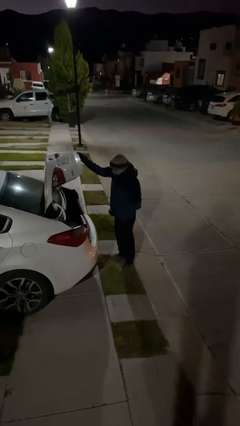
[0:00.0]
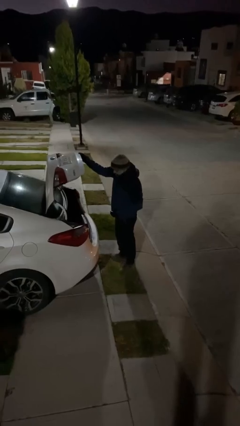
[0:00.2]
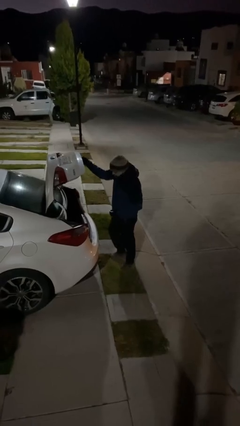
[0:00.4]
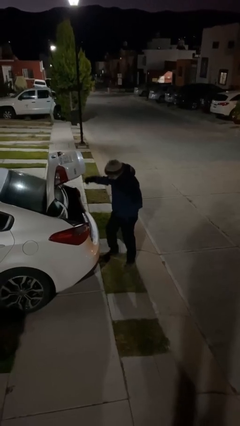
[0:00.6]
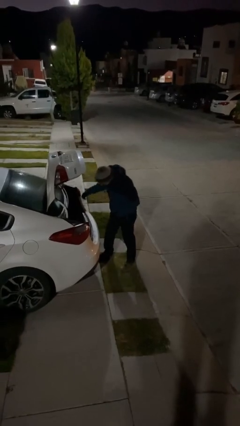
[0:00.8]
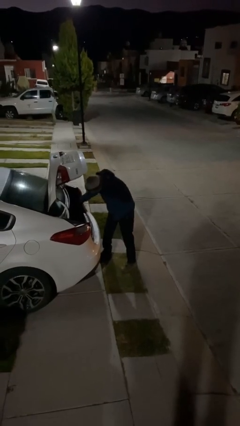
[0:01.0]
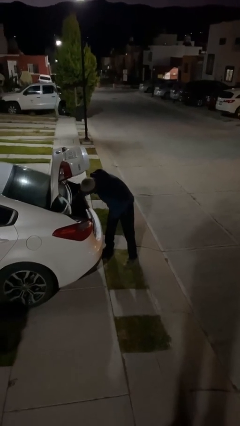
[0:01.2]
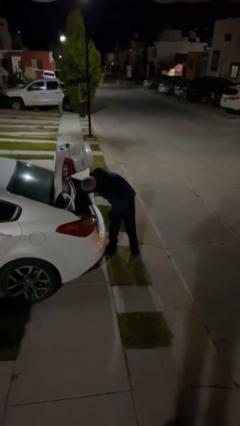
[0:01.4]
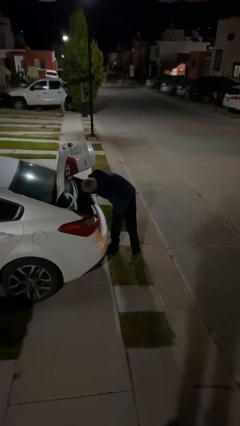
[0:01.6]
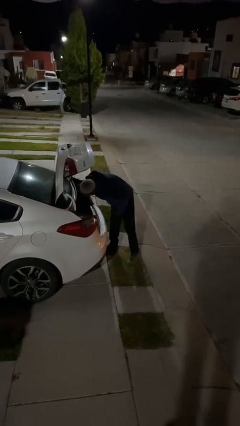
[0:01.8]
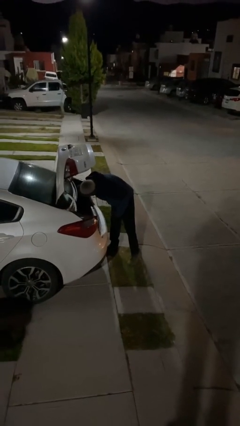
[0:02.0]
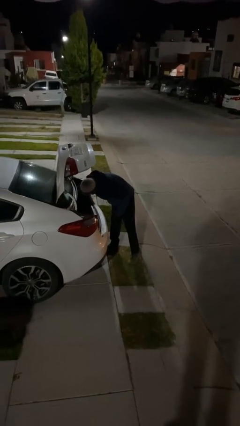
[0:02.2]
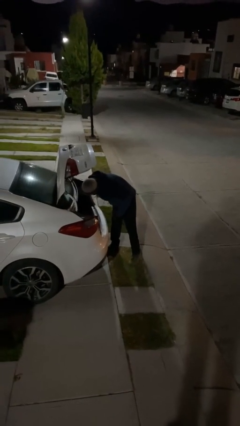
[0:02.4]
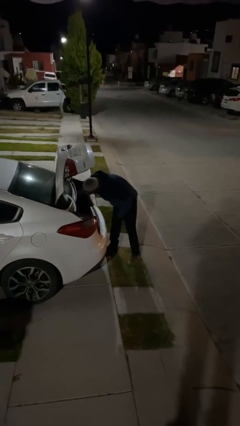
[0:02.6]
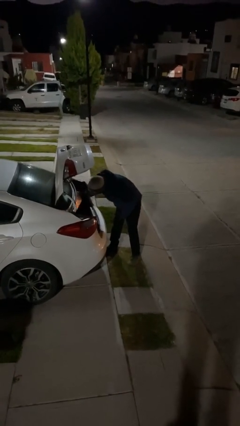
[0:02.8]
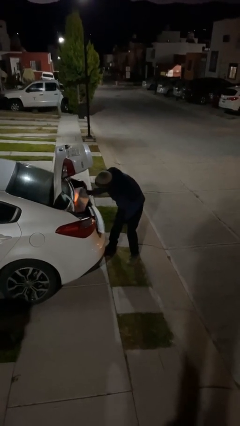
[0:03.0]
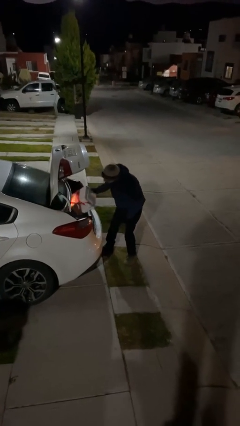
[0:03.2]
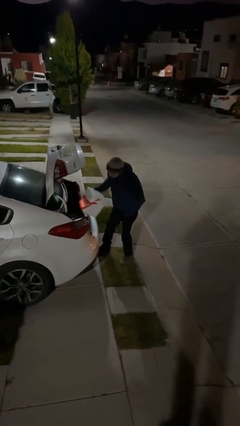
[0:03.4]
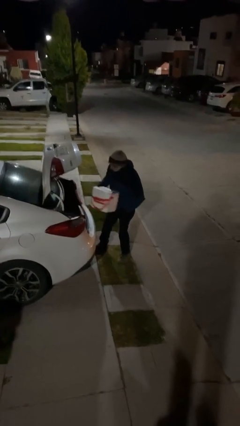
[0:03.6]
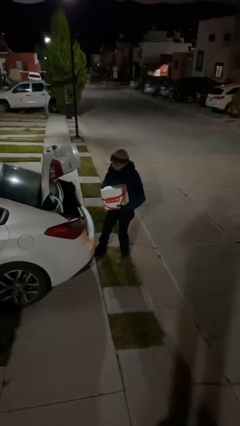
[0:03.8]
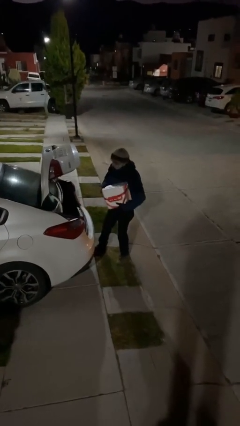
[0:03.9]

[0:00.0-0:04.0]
person unloads car

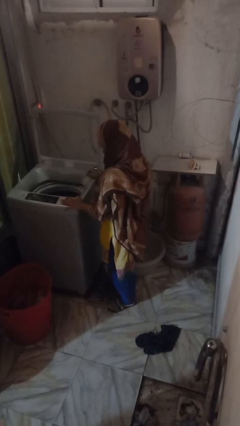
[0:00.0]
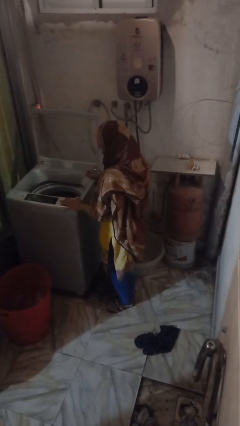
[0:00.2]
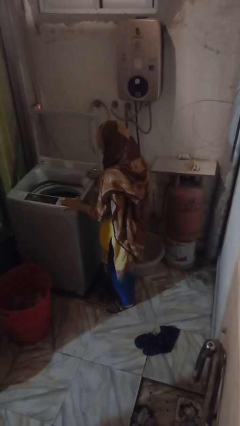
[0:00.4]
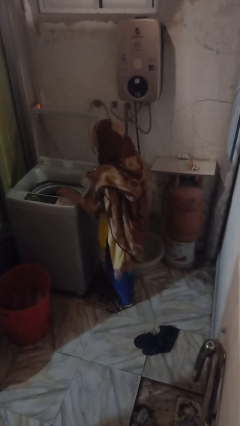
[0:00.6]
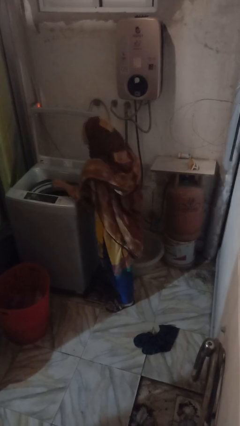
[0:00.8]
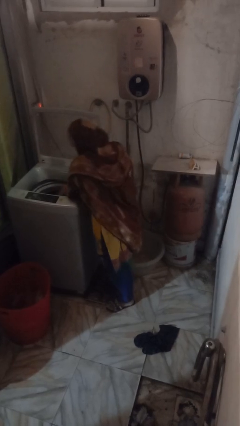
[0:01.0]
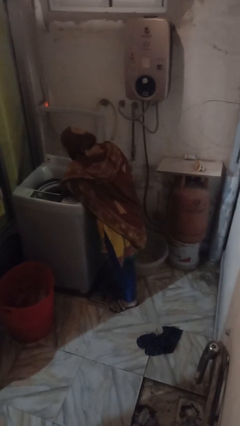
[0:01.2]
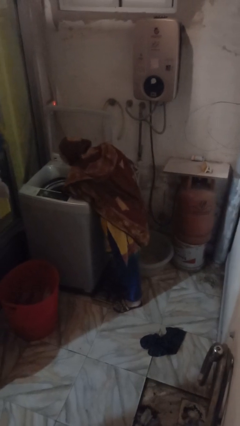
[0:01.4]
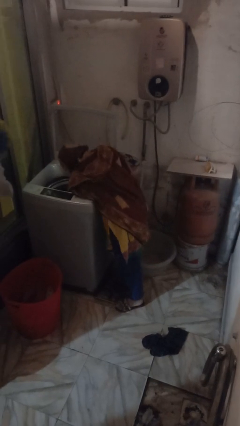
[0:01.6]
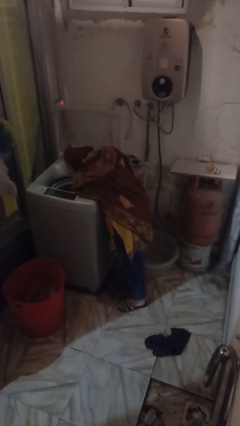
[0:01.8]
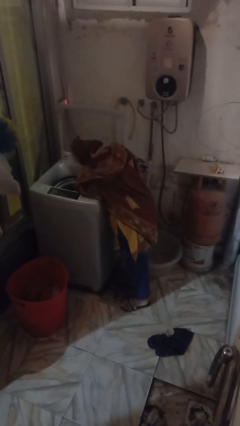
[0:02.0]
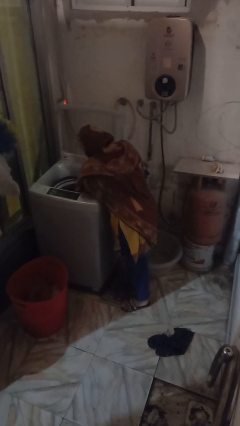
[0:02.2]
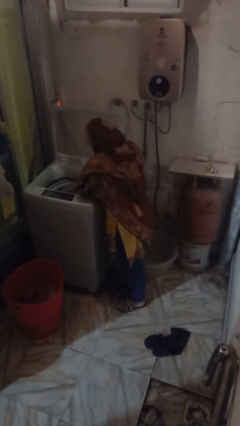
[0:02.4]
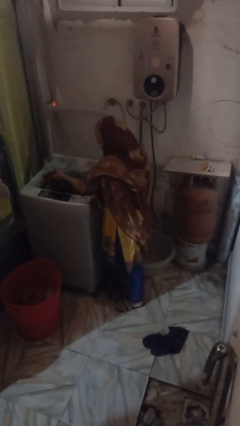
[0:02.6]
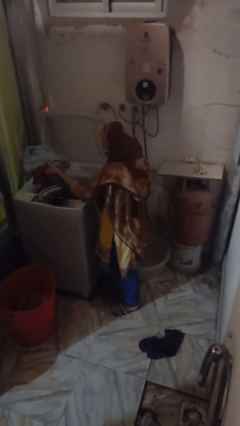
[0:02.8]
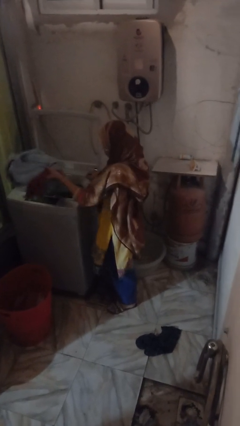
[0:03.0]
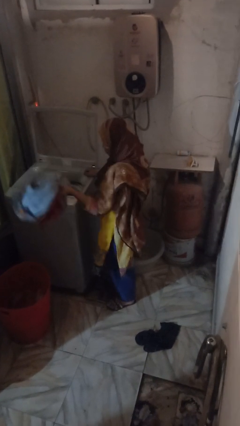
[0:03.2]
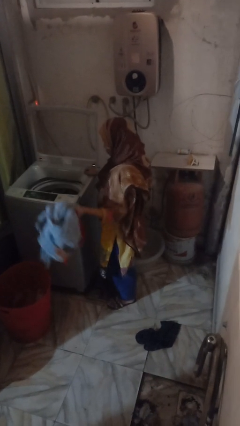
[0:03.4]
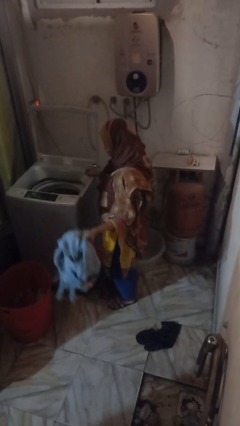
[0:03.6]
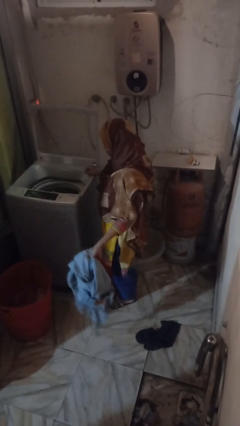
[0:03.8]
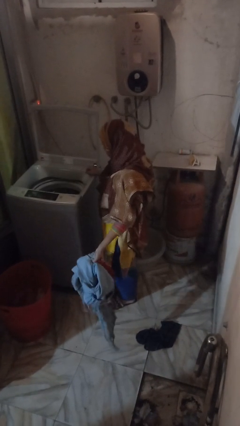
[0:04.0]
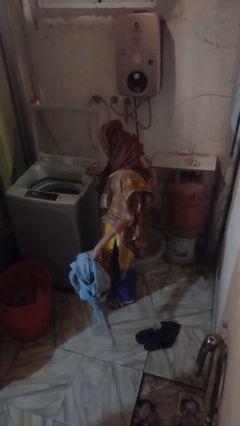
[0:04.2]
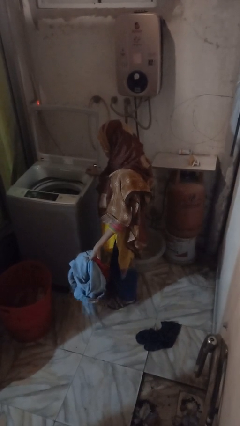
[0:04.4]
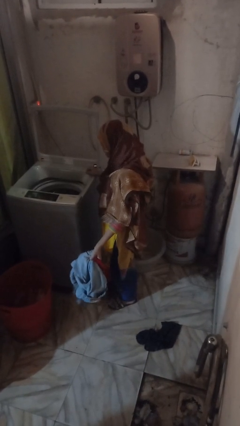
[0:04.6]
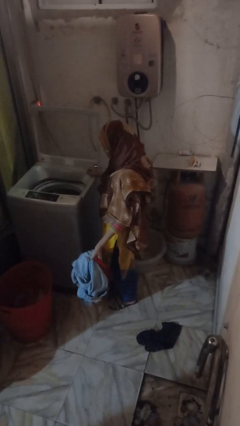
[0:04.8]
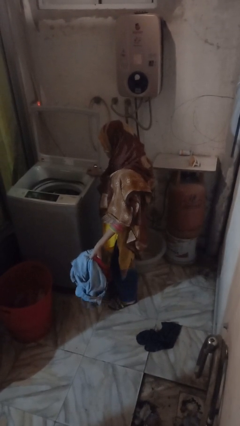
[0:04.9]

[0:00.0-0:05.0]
person unloads clotheswasher

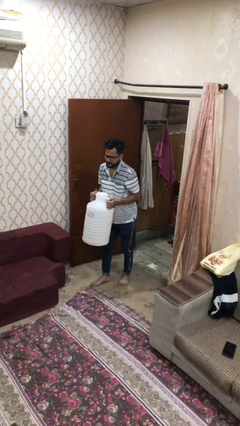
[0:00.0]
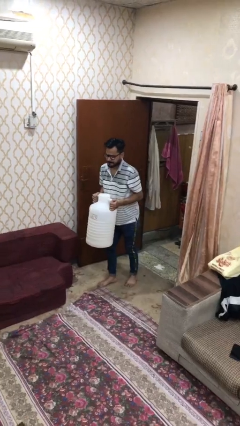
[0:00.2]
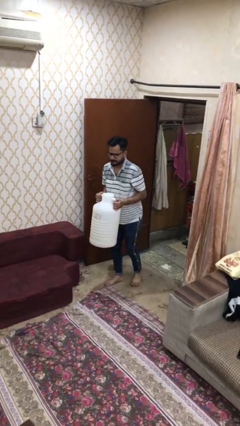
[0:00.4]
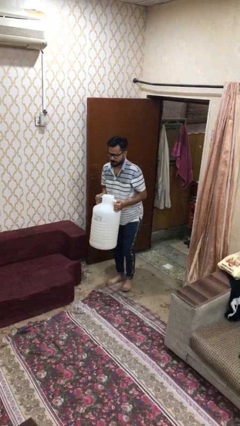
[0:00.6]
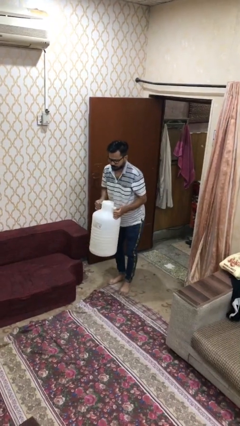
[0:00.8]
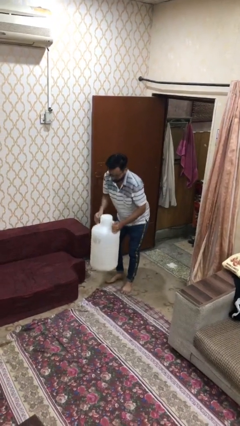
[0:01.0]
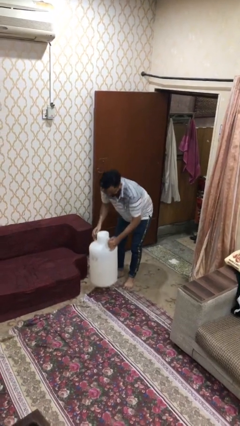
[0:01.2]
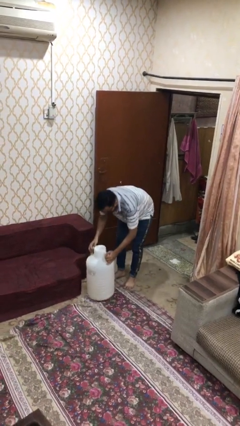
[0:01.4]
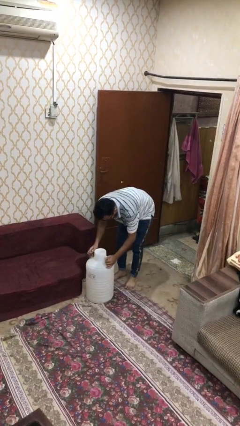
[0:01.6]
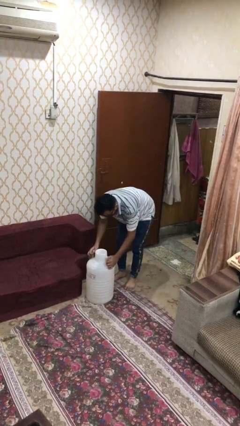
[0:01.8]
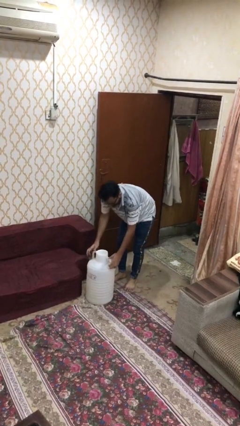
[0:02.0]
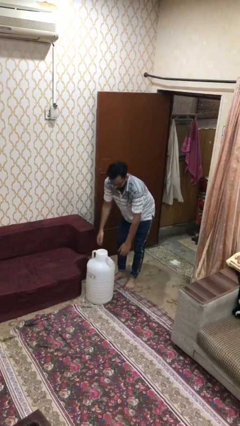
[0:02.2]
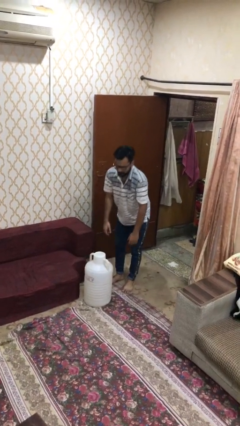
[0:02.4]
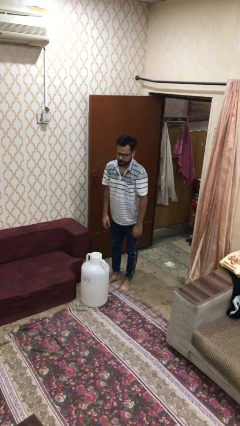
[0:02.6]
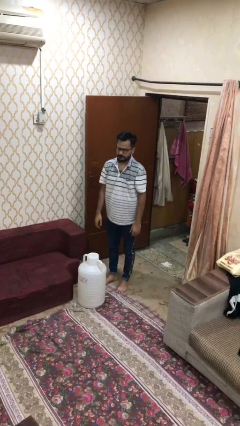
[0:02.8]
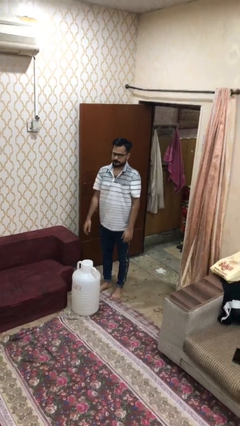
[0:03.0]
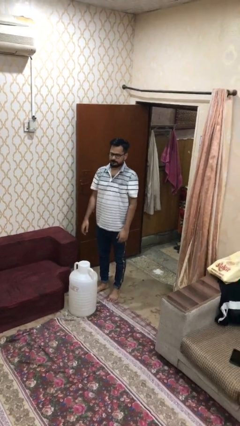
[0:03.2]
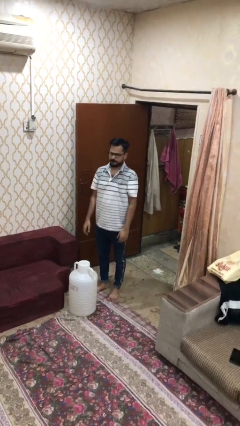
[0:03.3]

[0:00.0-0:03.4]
person puts down object on floor

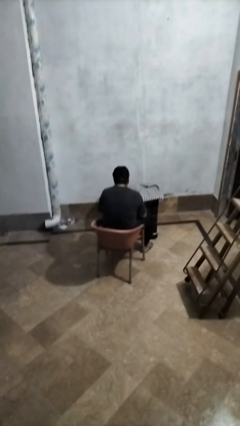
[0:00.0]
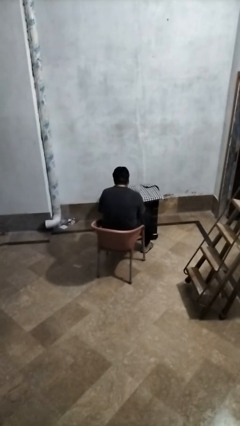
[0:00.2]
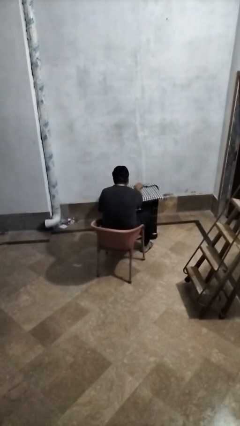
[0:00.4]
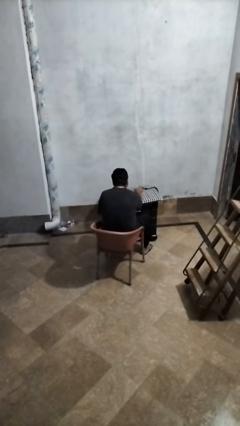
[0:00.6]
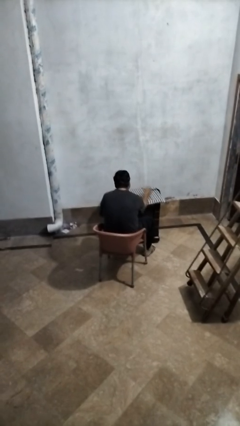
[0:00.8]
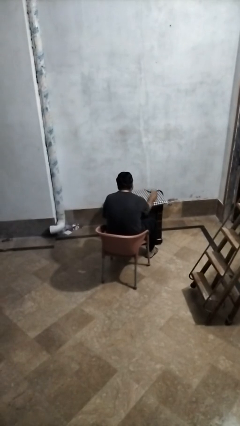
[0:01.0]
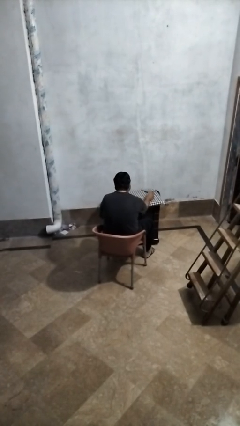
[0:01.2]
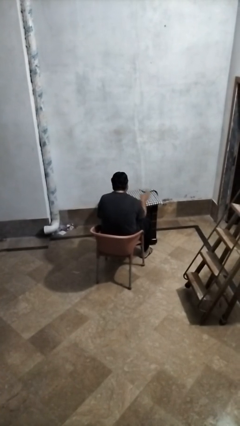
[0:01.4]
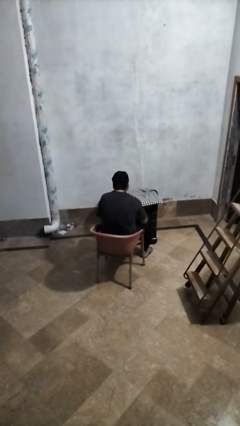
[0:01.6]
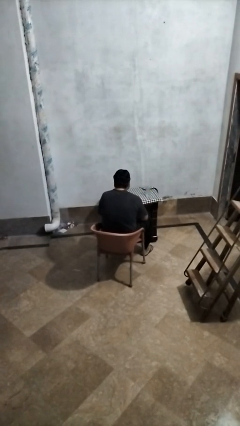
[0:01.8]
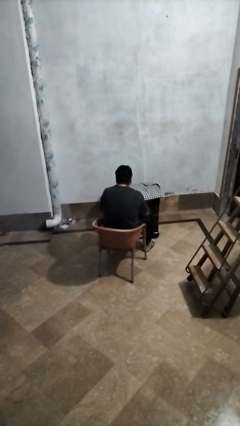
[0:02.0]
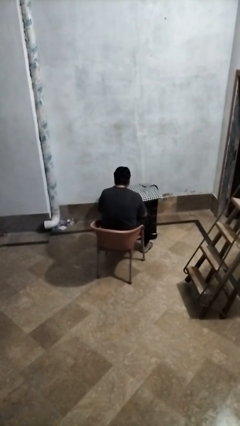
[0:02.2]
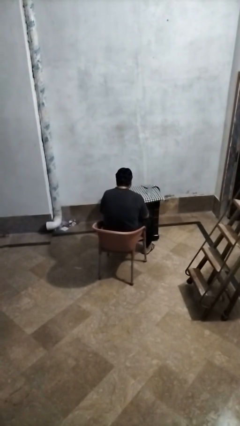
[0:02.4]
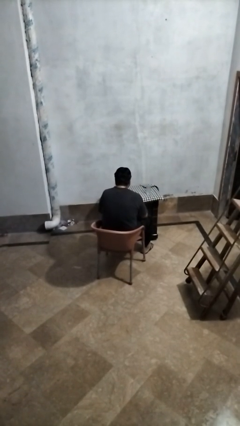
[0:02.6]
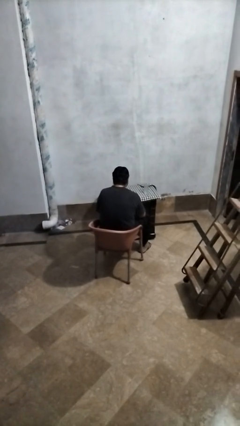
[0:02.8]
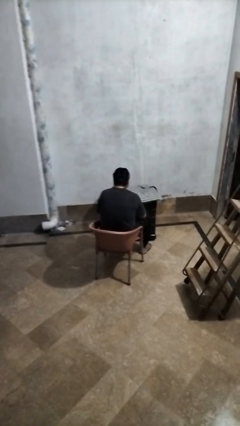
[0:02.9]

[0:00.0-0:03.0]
person sets upright glass

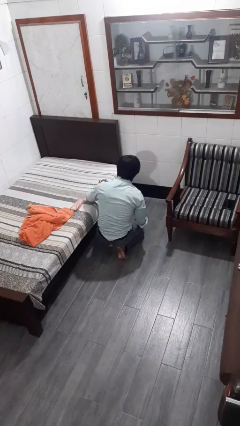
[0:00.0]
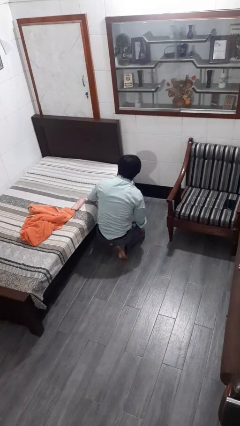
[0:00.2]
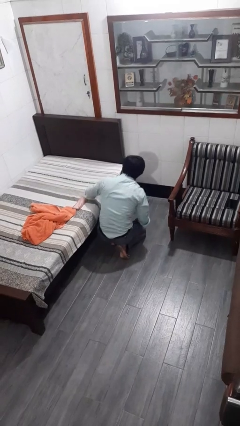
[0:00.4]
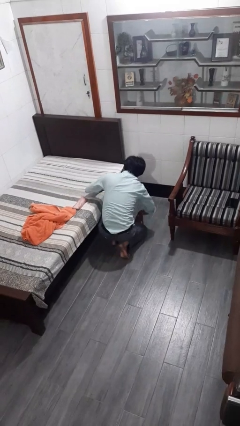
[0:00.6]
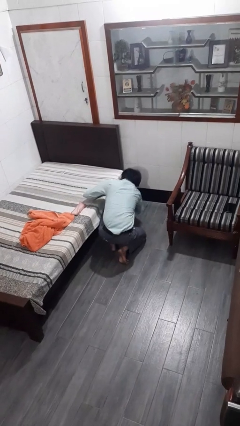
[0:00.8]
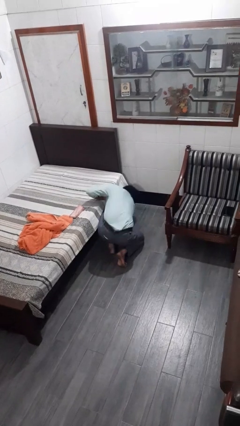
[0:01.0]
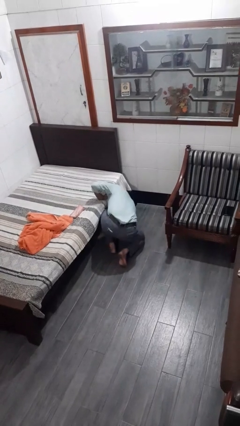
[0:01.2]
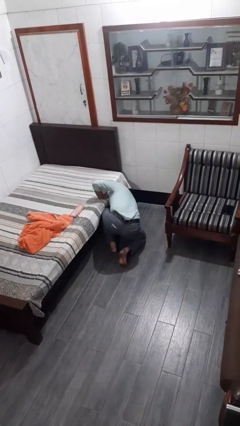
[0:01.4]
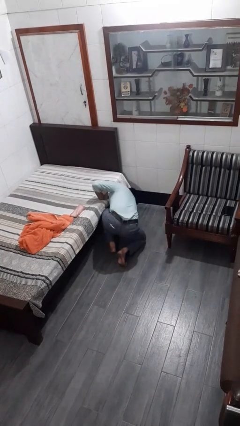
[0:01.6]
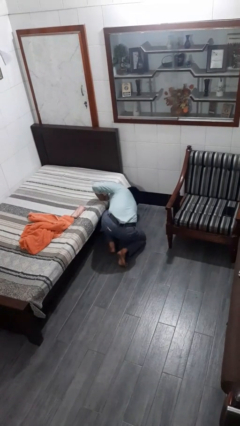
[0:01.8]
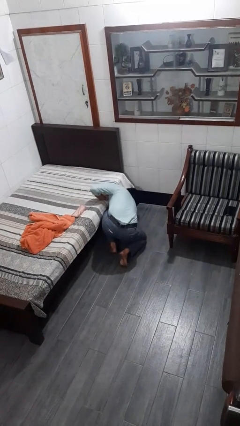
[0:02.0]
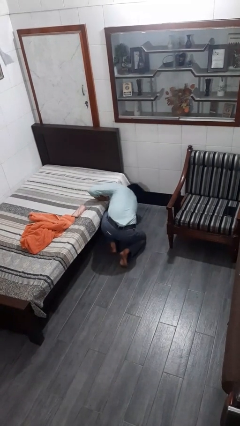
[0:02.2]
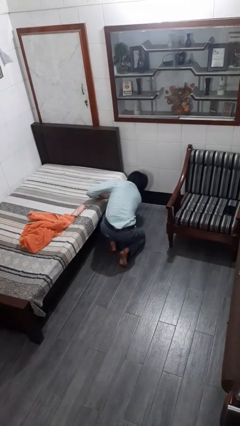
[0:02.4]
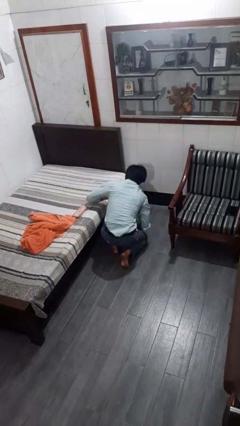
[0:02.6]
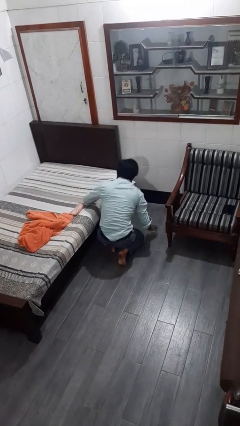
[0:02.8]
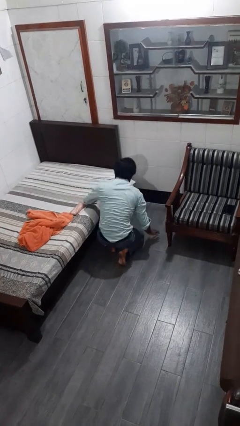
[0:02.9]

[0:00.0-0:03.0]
person searches under bed
